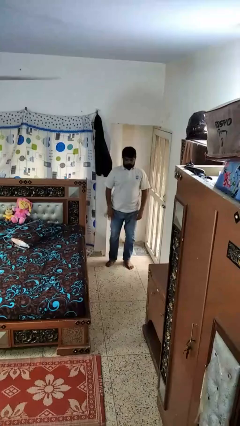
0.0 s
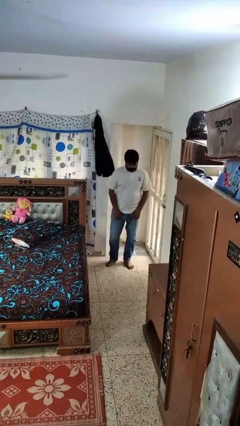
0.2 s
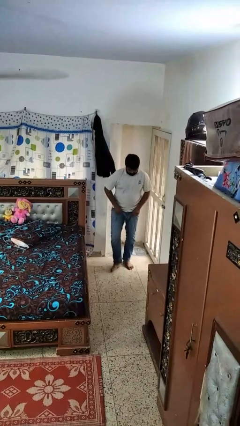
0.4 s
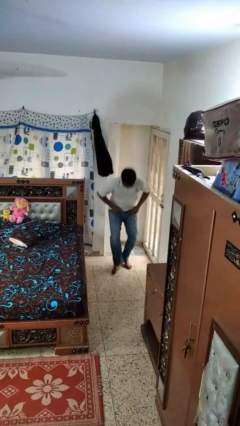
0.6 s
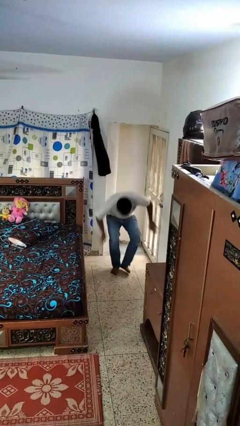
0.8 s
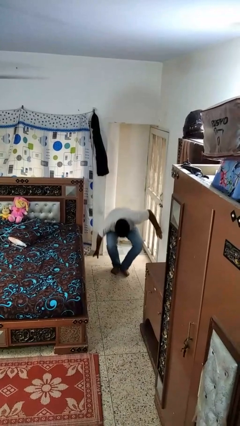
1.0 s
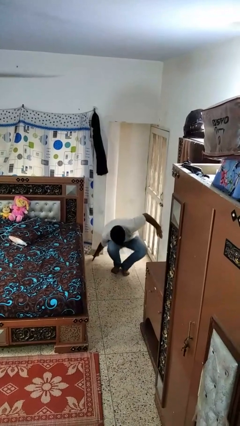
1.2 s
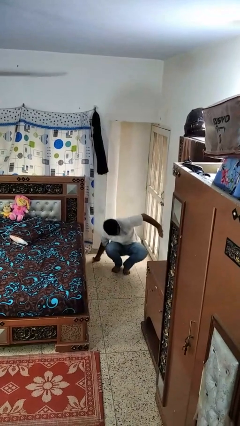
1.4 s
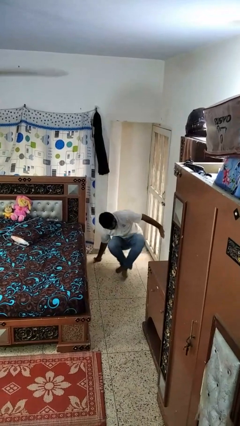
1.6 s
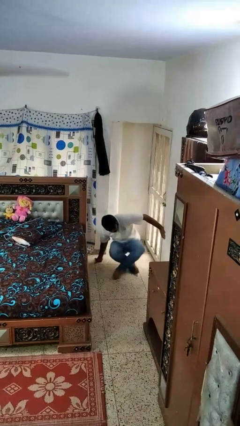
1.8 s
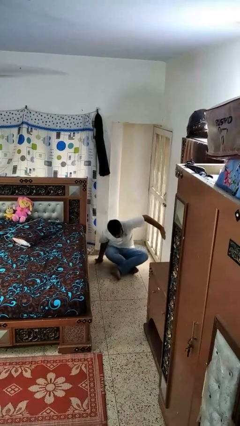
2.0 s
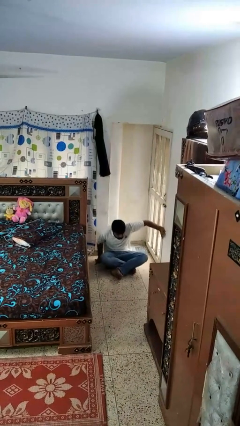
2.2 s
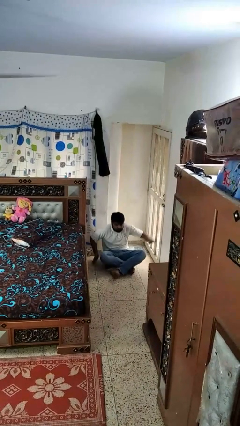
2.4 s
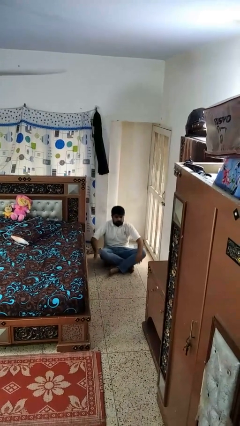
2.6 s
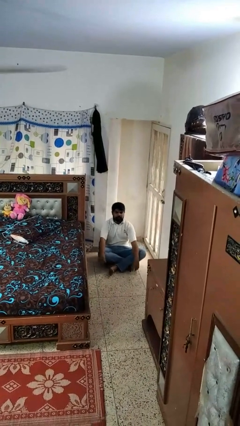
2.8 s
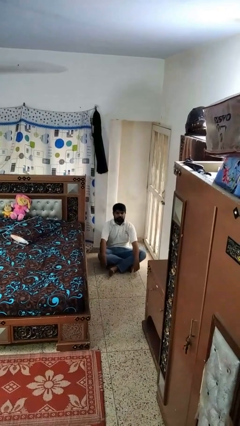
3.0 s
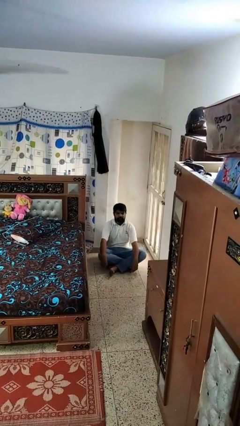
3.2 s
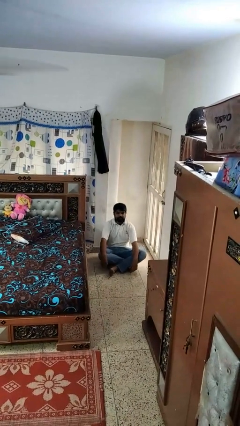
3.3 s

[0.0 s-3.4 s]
person sits crisscross

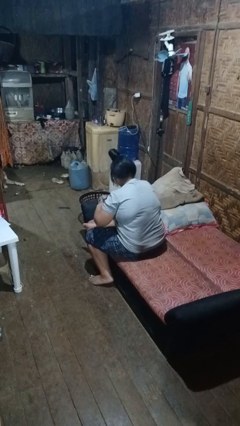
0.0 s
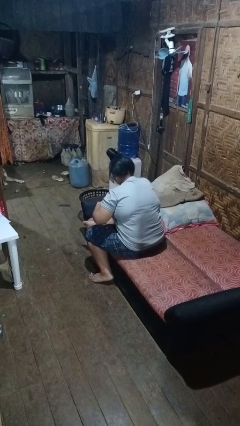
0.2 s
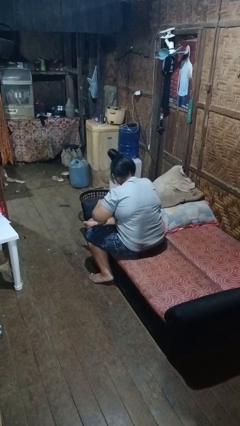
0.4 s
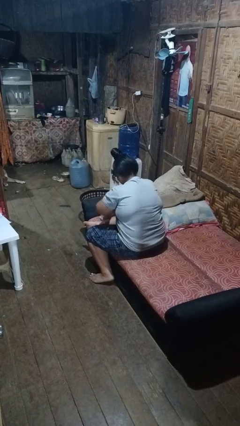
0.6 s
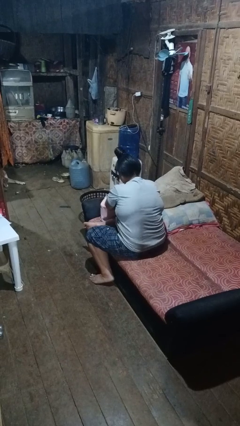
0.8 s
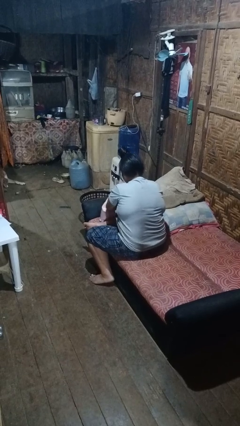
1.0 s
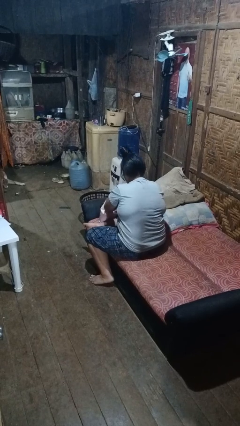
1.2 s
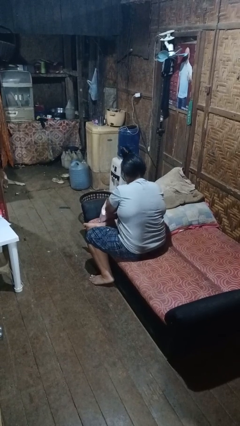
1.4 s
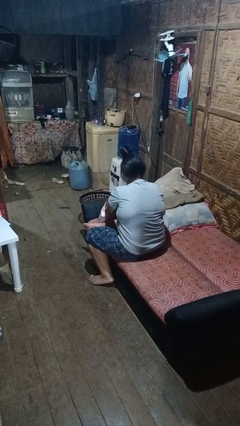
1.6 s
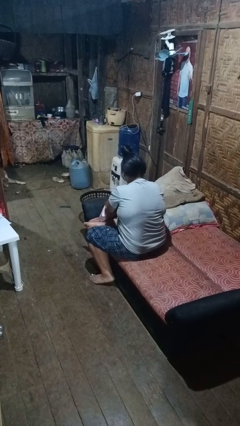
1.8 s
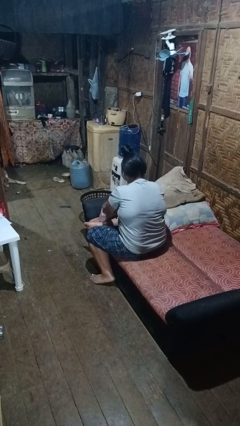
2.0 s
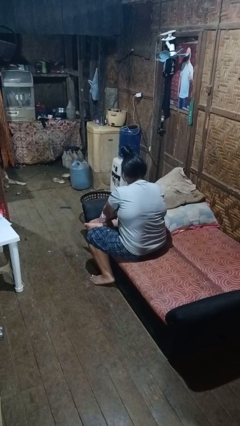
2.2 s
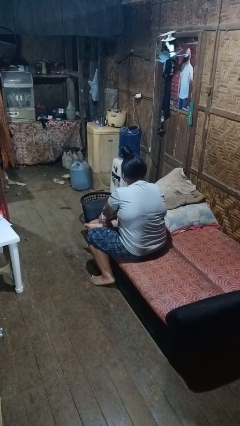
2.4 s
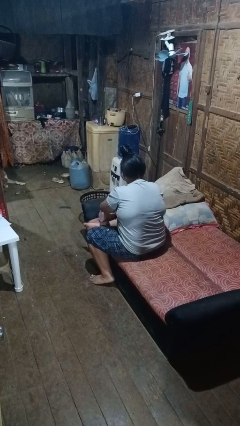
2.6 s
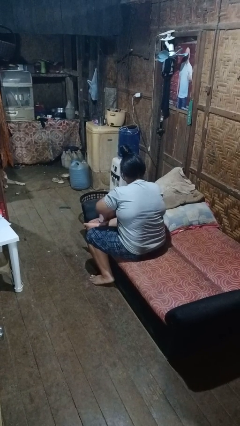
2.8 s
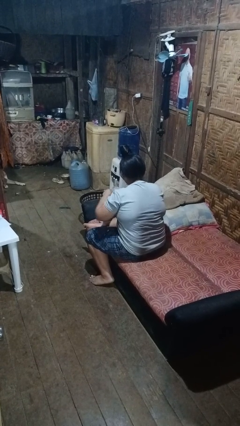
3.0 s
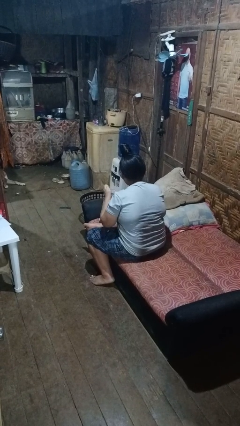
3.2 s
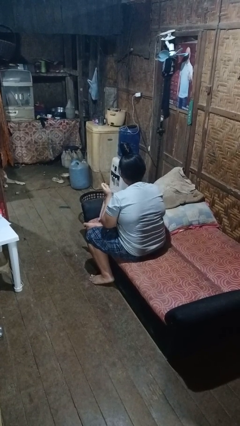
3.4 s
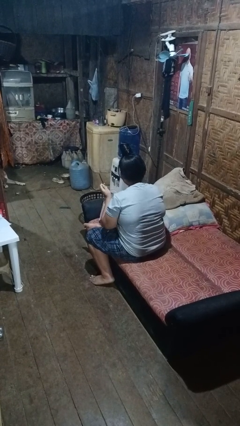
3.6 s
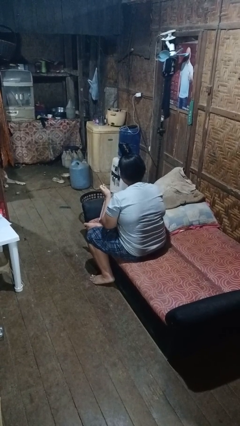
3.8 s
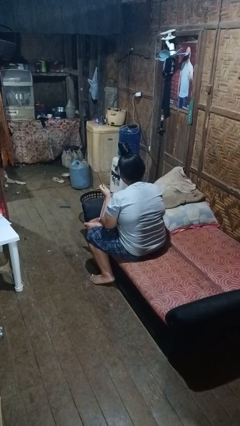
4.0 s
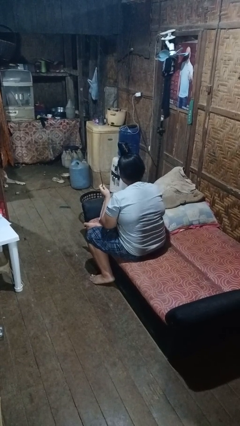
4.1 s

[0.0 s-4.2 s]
person takes object from bag

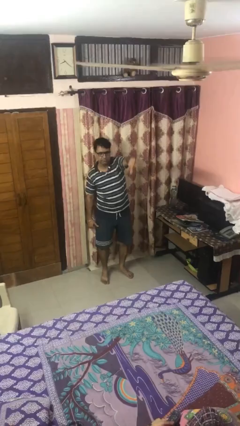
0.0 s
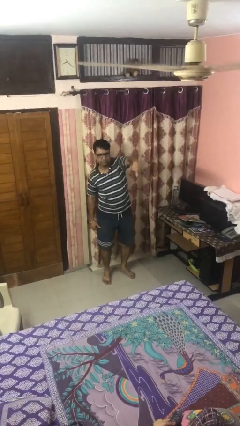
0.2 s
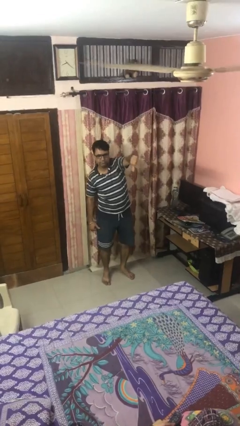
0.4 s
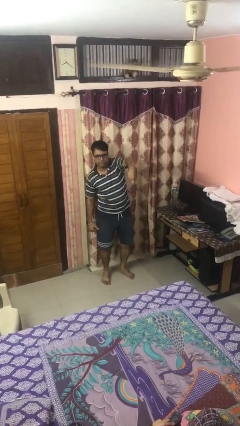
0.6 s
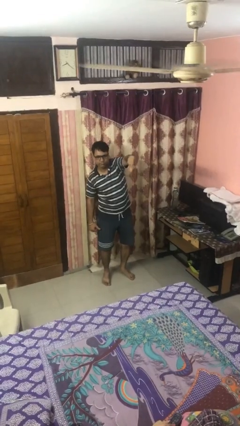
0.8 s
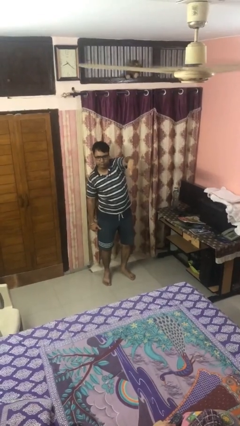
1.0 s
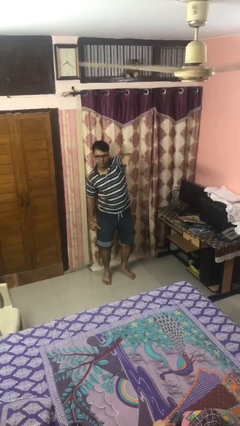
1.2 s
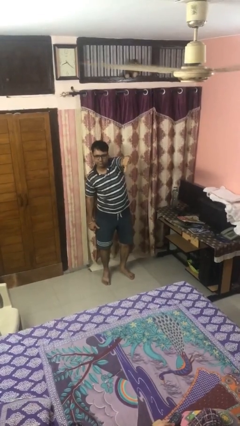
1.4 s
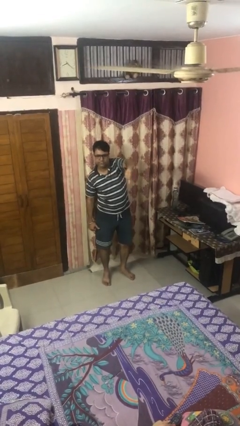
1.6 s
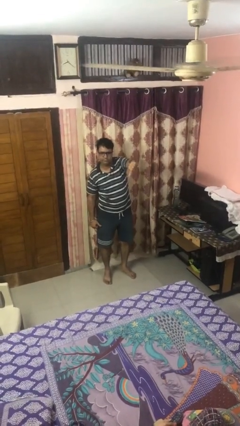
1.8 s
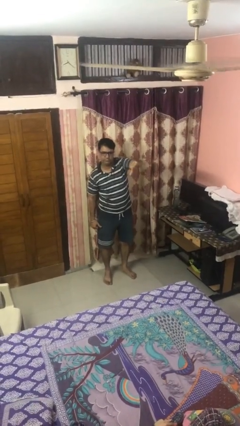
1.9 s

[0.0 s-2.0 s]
person gestures thumbs down

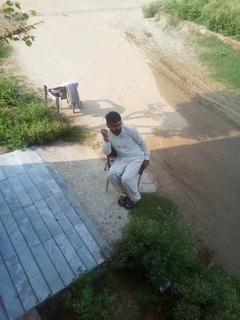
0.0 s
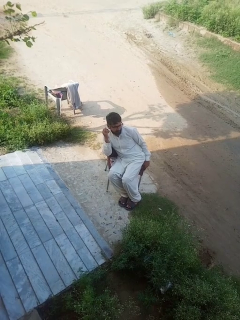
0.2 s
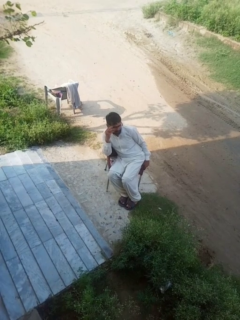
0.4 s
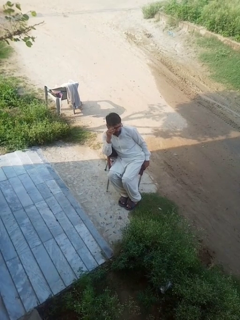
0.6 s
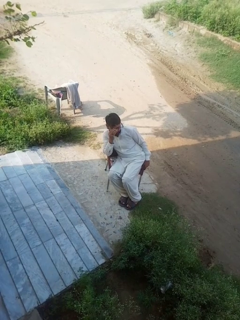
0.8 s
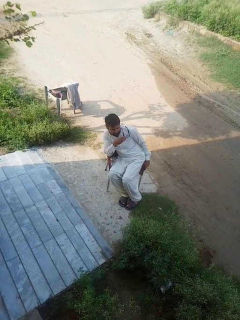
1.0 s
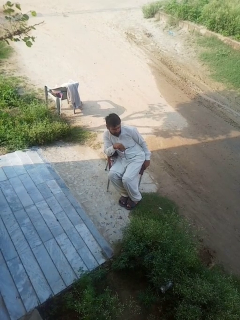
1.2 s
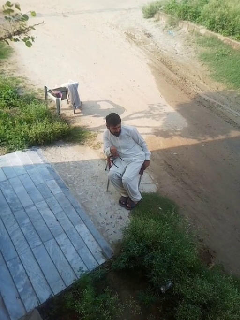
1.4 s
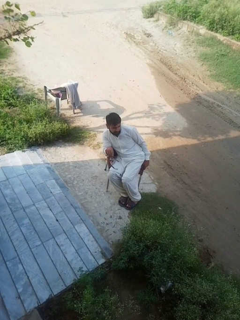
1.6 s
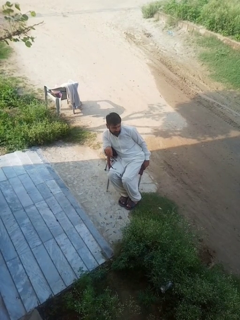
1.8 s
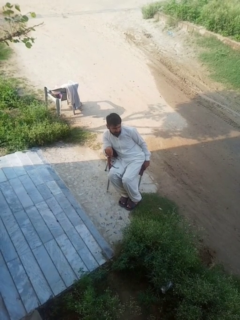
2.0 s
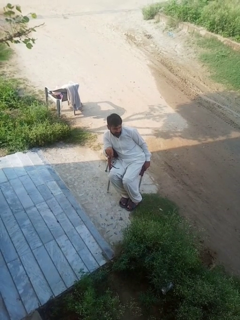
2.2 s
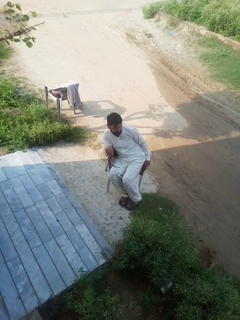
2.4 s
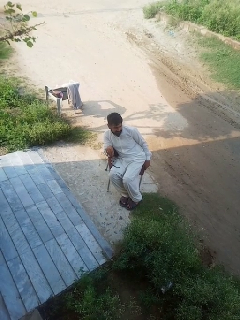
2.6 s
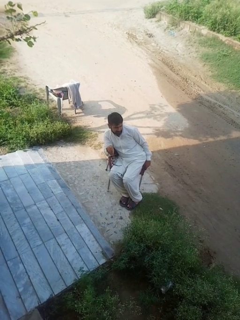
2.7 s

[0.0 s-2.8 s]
person takes off glasses

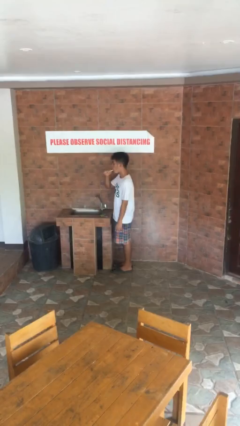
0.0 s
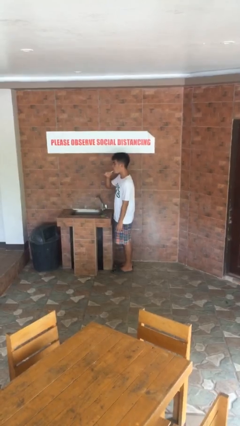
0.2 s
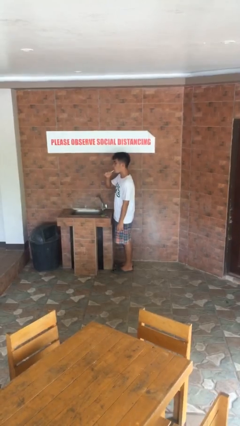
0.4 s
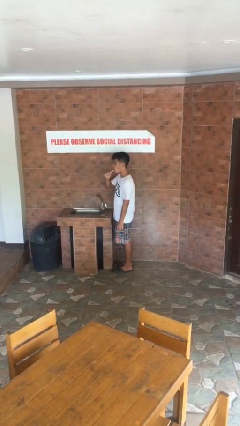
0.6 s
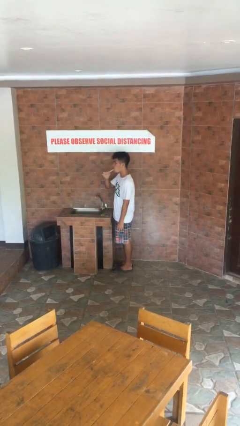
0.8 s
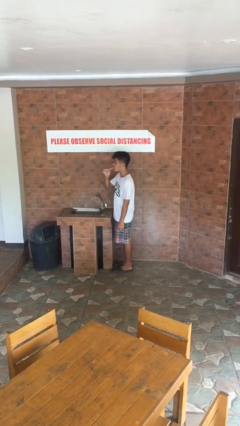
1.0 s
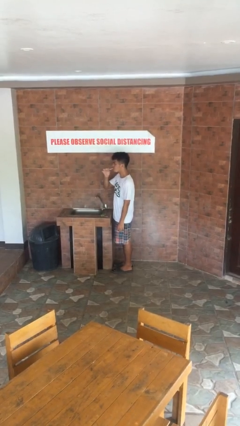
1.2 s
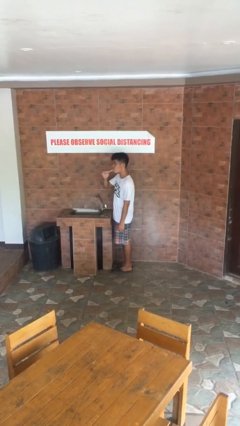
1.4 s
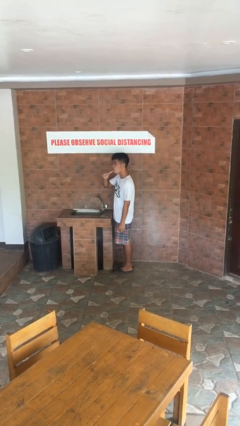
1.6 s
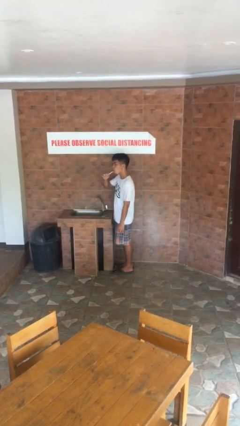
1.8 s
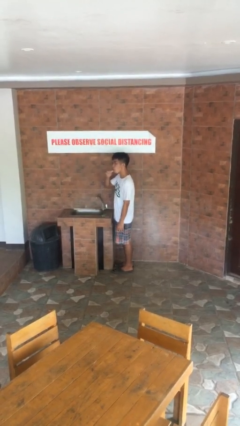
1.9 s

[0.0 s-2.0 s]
person brushes teeth

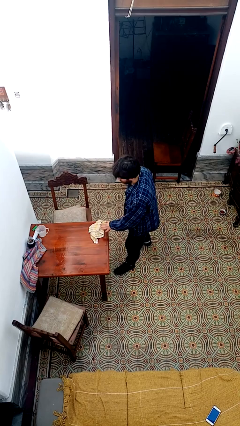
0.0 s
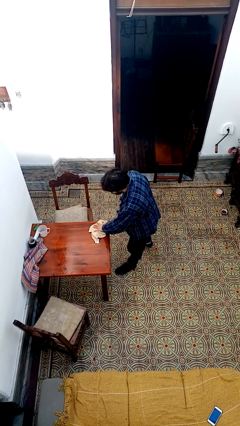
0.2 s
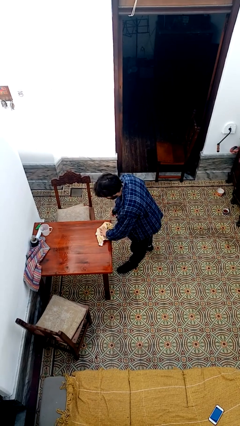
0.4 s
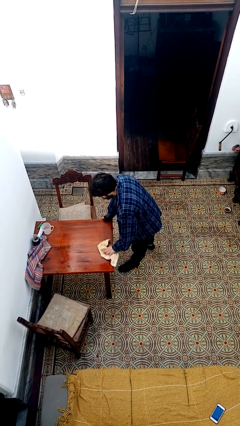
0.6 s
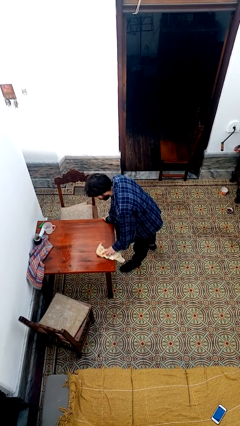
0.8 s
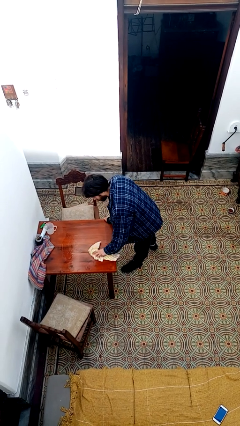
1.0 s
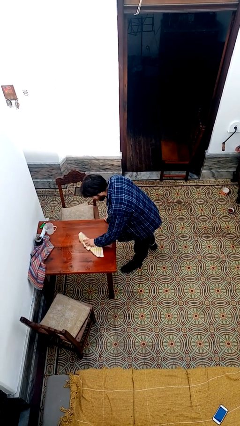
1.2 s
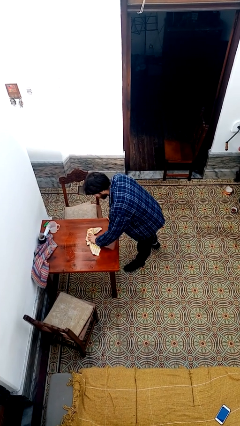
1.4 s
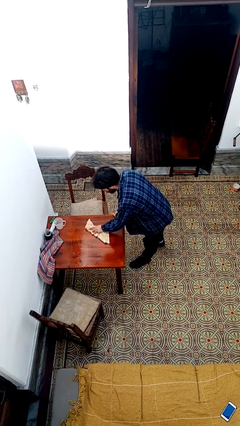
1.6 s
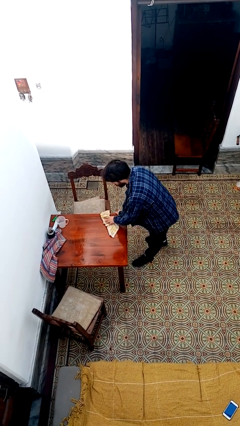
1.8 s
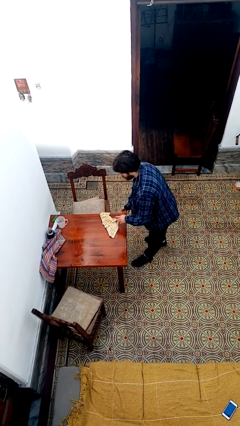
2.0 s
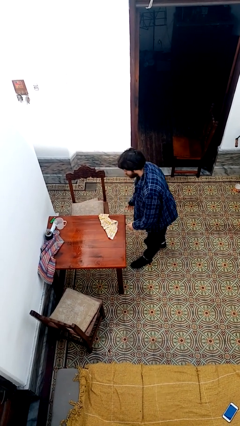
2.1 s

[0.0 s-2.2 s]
person cleans table with rag

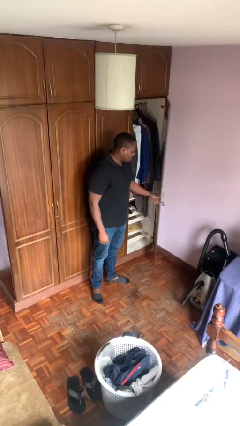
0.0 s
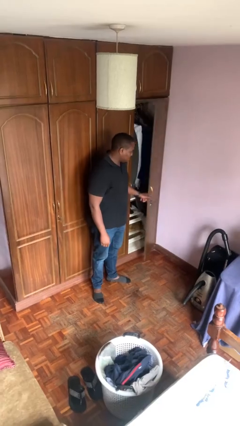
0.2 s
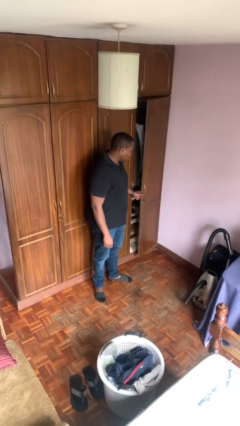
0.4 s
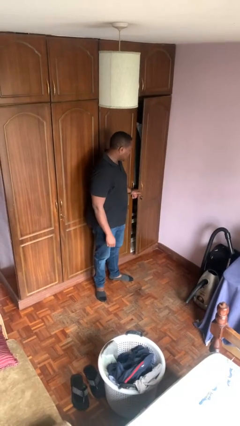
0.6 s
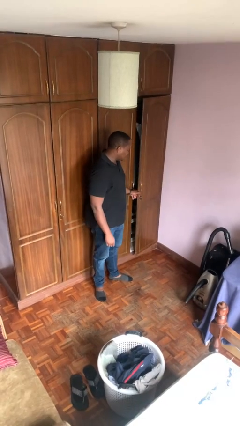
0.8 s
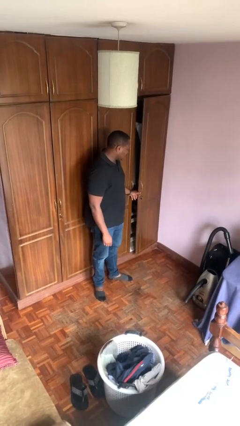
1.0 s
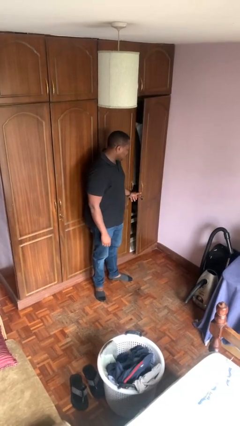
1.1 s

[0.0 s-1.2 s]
person closes closet door
